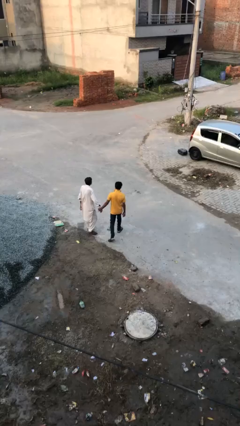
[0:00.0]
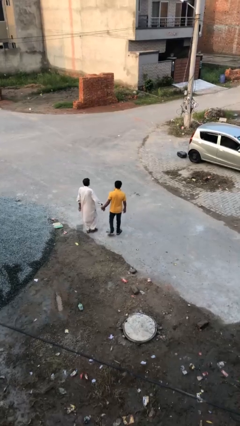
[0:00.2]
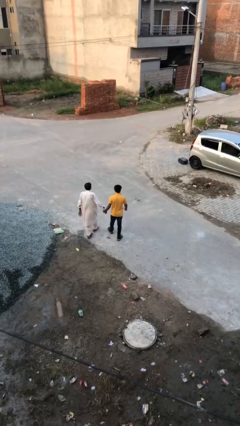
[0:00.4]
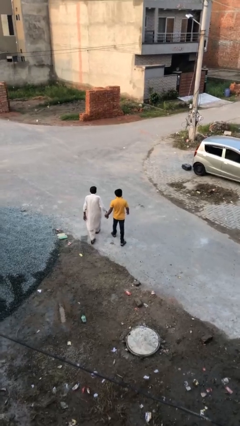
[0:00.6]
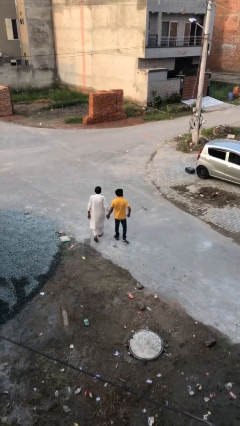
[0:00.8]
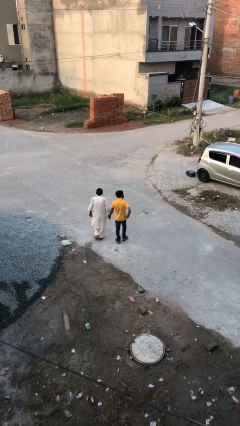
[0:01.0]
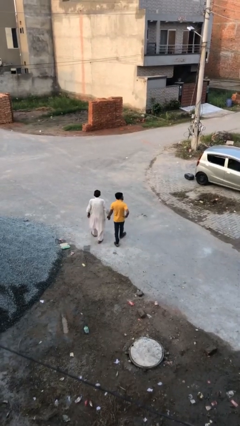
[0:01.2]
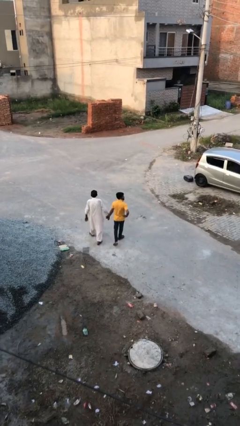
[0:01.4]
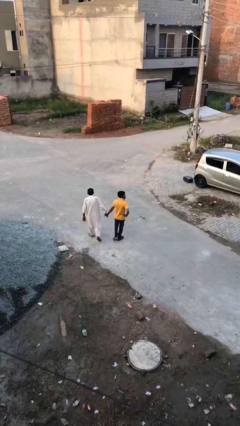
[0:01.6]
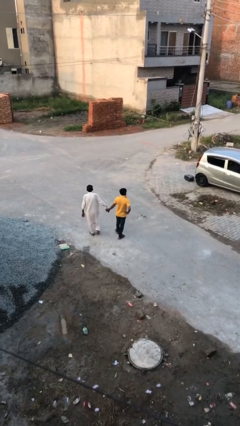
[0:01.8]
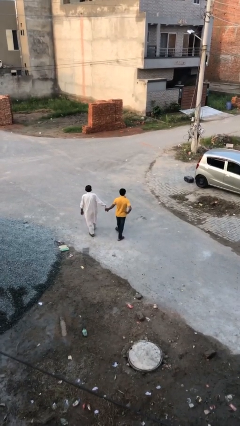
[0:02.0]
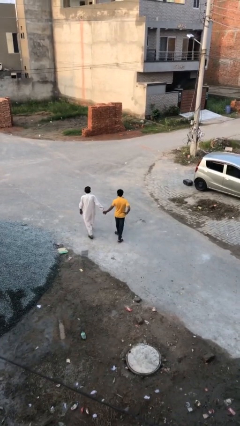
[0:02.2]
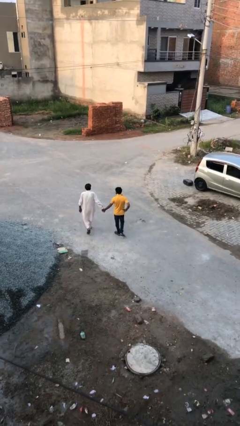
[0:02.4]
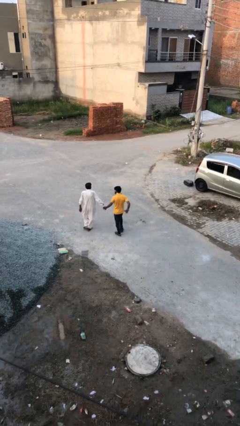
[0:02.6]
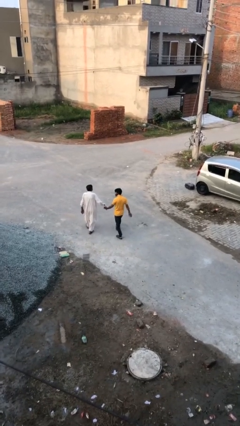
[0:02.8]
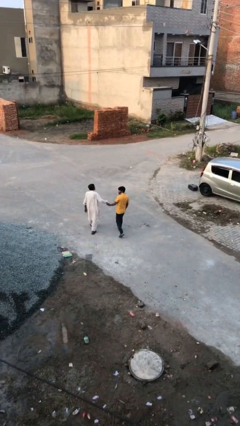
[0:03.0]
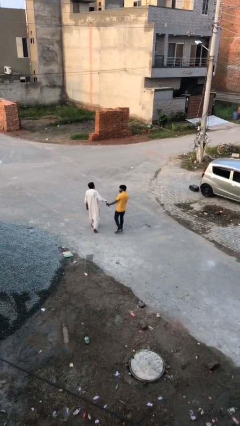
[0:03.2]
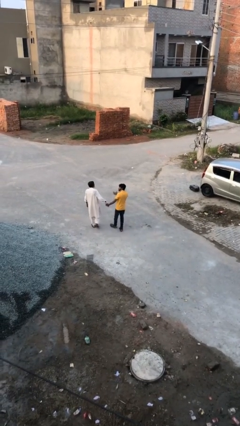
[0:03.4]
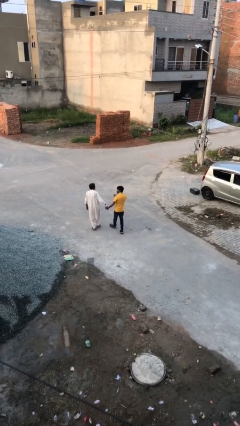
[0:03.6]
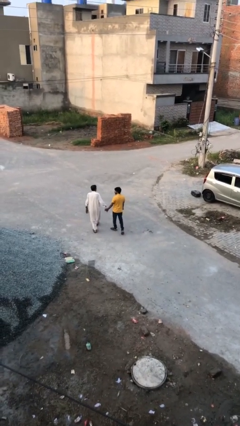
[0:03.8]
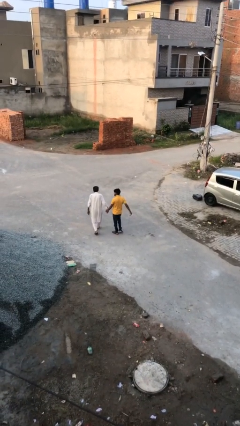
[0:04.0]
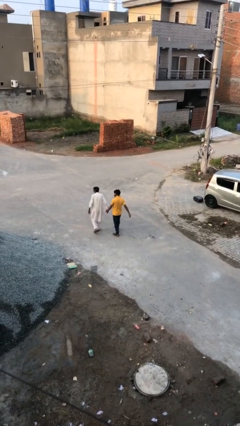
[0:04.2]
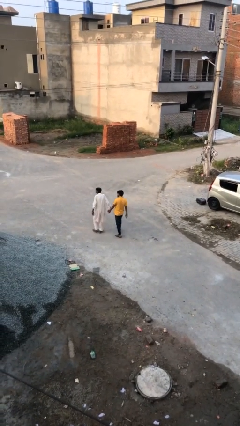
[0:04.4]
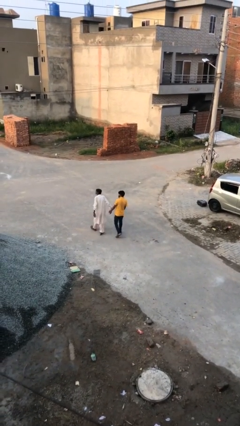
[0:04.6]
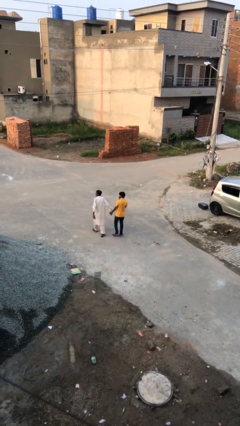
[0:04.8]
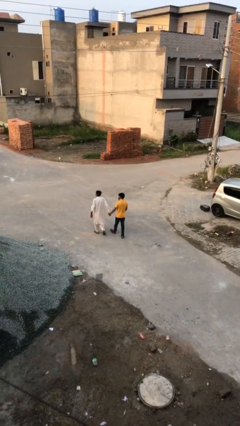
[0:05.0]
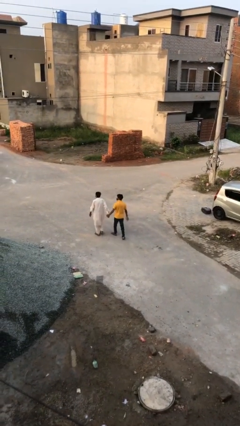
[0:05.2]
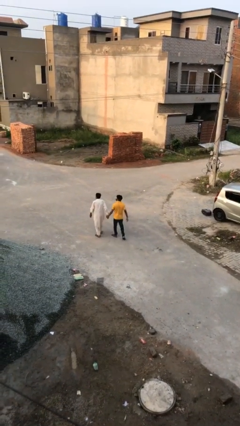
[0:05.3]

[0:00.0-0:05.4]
person holds hand

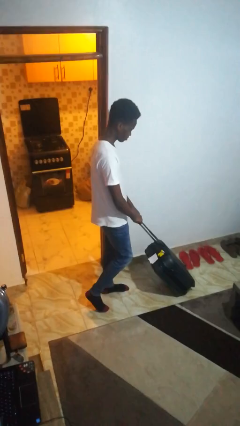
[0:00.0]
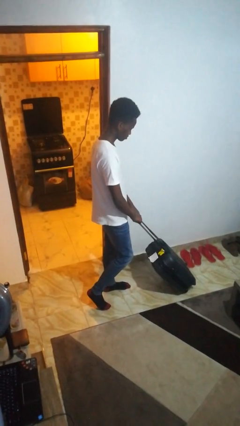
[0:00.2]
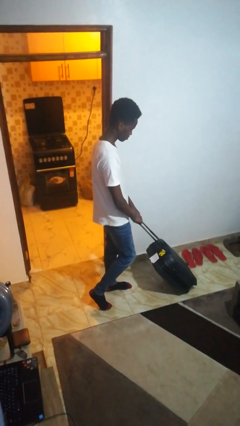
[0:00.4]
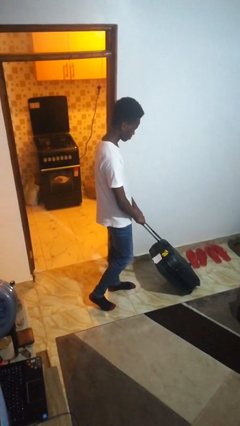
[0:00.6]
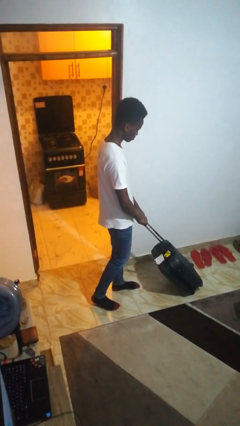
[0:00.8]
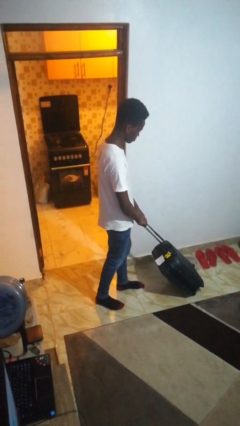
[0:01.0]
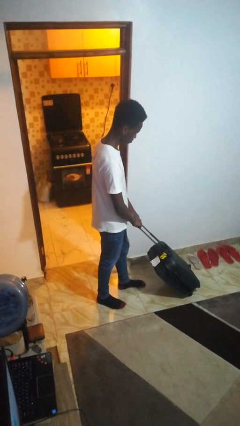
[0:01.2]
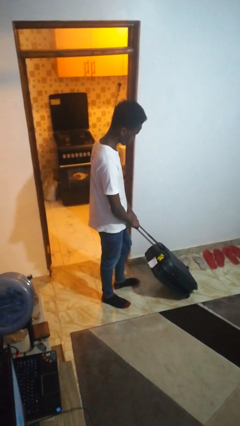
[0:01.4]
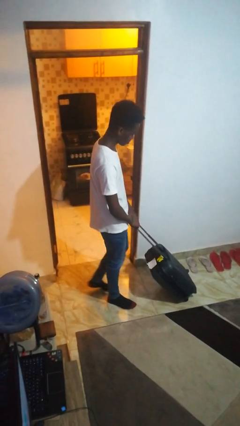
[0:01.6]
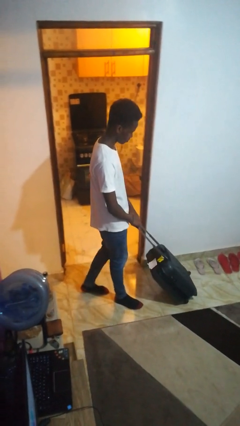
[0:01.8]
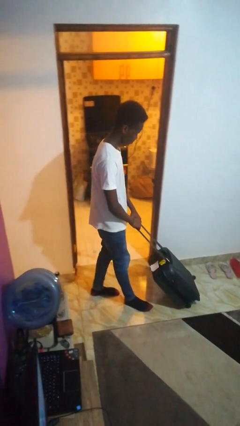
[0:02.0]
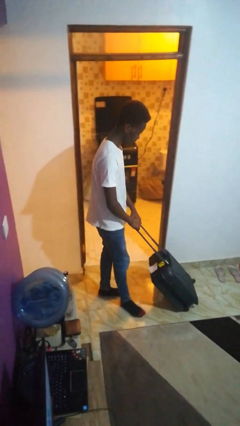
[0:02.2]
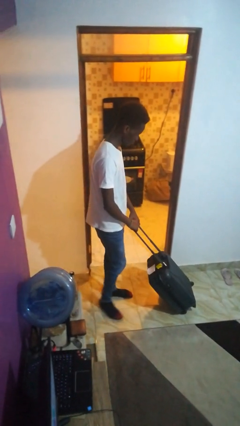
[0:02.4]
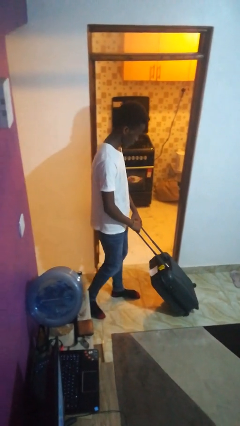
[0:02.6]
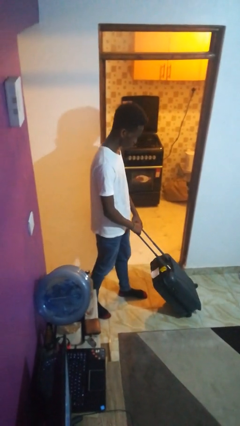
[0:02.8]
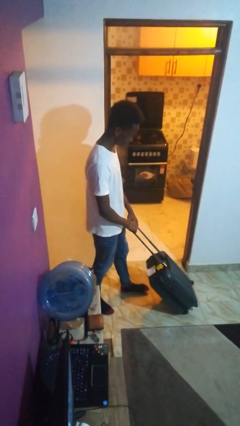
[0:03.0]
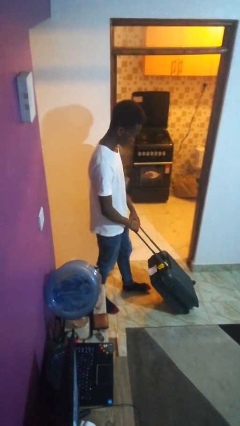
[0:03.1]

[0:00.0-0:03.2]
person pulls wheeled cart

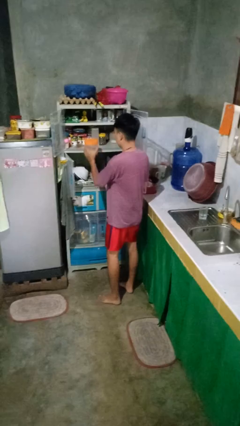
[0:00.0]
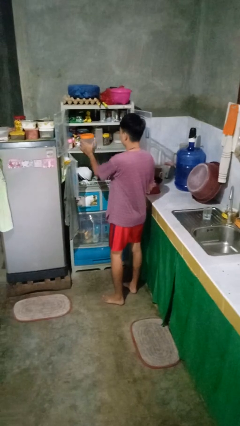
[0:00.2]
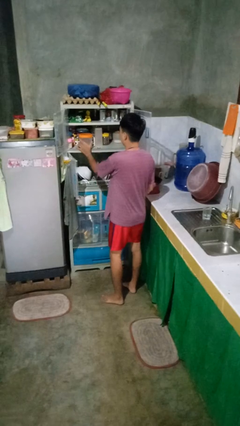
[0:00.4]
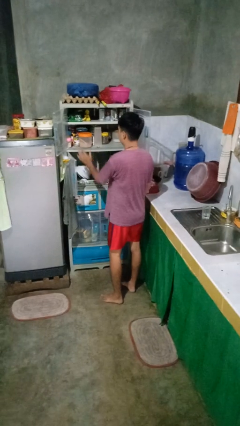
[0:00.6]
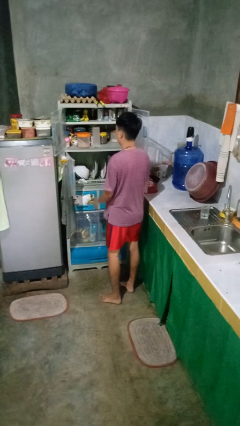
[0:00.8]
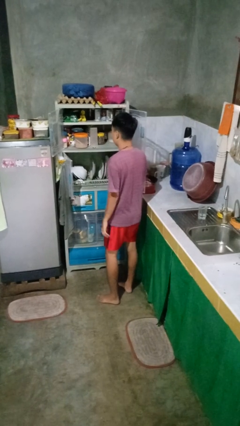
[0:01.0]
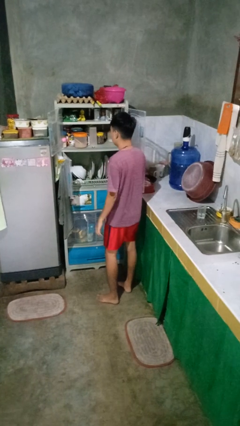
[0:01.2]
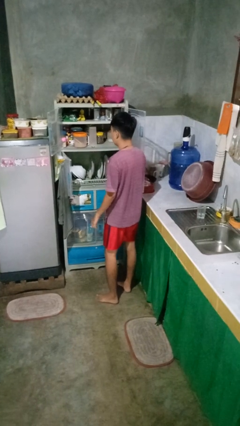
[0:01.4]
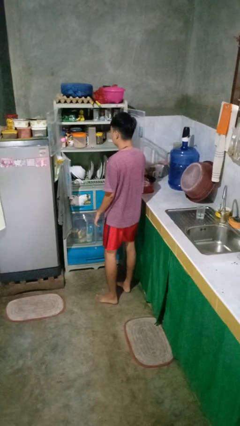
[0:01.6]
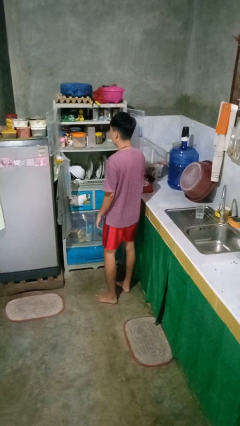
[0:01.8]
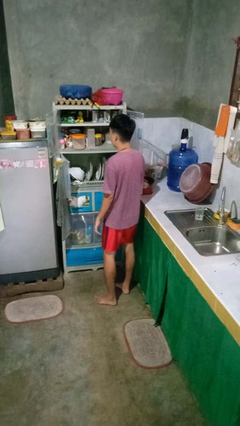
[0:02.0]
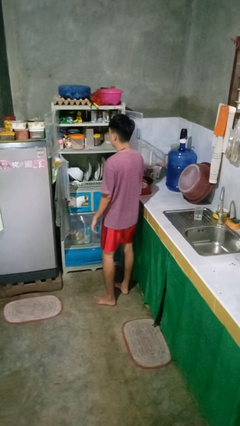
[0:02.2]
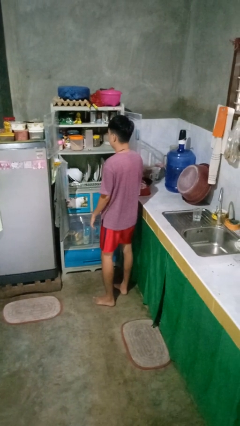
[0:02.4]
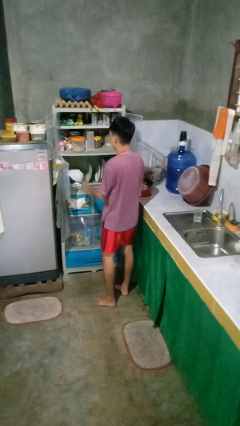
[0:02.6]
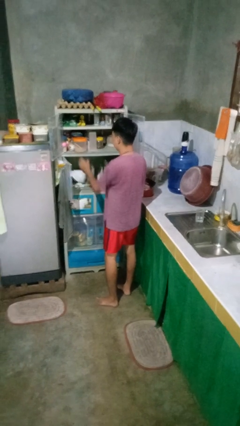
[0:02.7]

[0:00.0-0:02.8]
person puts object in cabinet

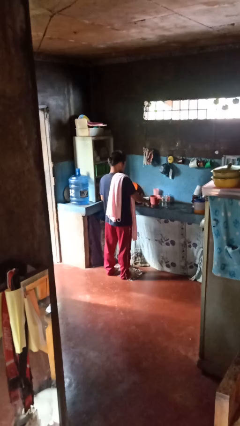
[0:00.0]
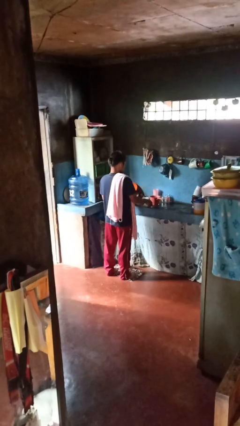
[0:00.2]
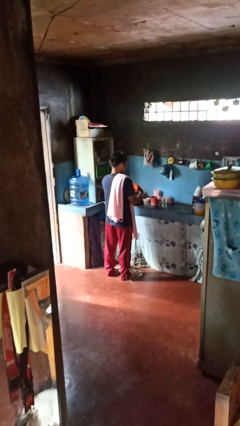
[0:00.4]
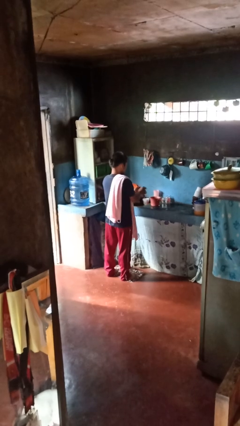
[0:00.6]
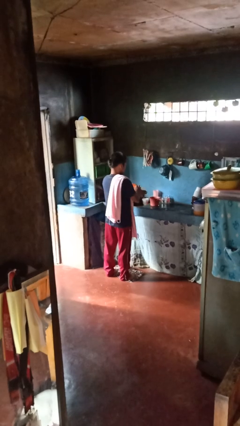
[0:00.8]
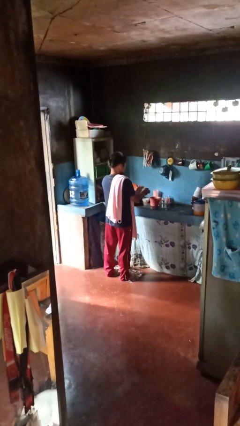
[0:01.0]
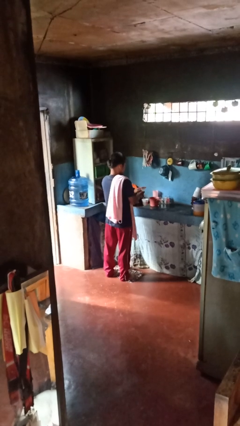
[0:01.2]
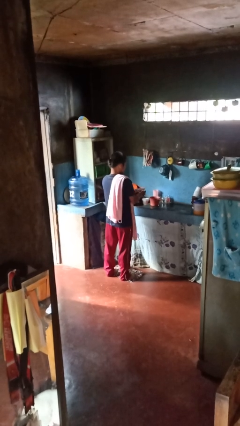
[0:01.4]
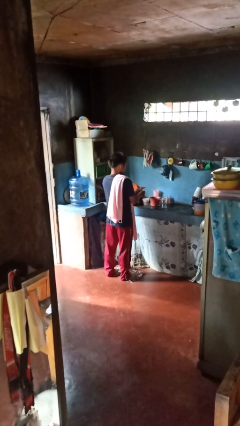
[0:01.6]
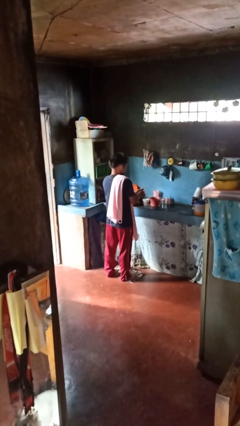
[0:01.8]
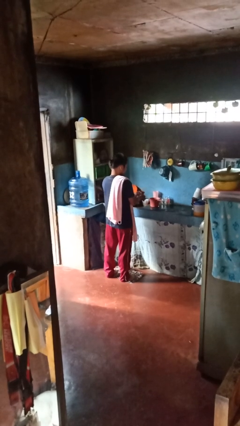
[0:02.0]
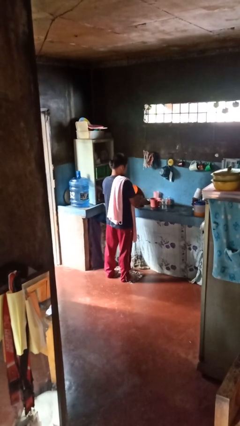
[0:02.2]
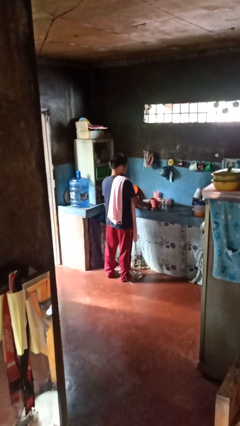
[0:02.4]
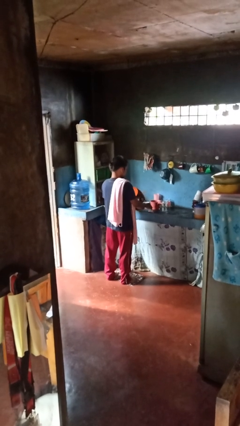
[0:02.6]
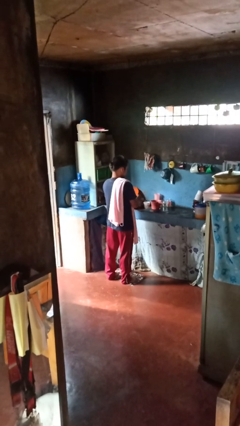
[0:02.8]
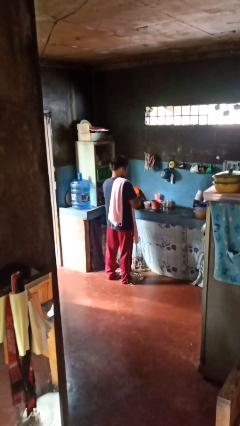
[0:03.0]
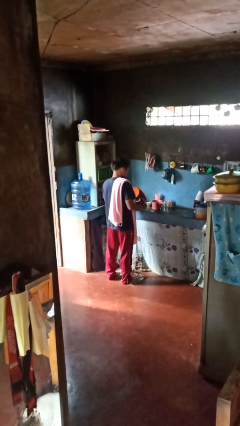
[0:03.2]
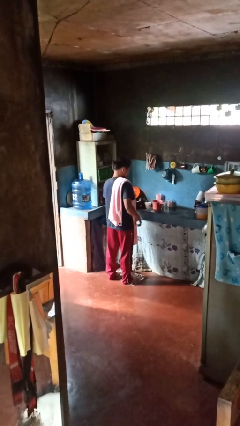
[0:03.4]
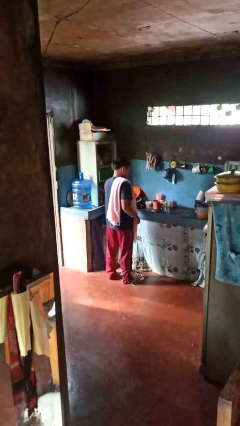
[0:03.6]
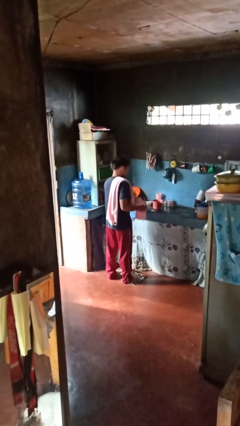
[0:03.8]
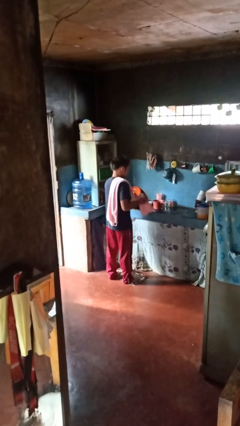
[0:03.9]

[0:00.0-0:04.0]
person washes hands

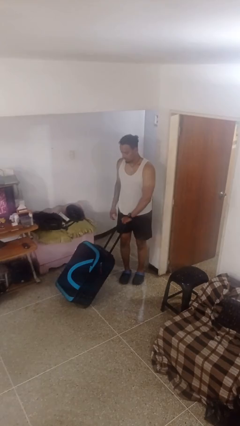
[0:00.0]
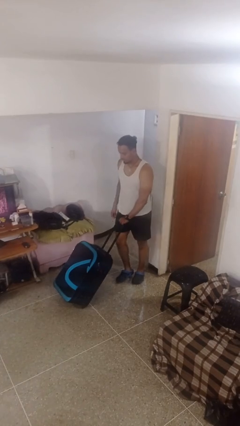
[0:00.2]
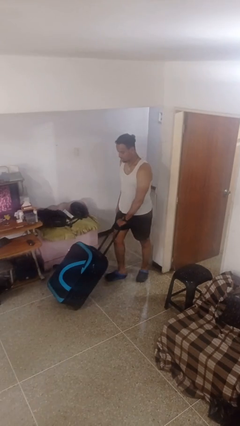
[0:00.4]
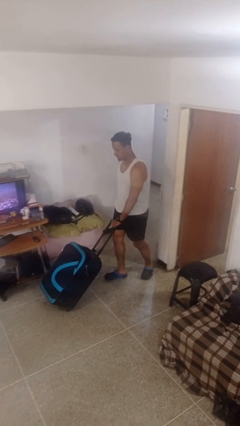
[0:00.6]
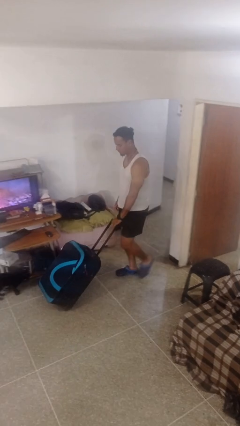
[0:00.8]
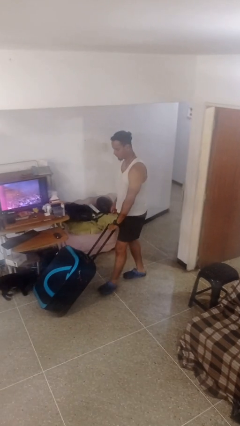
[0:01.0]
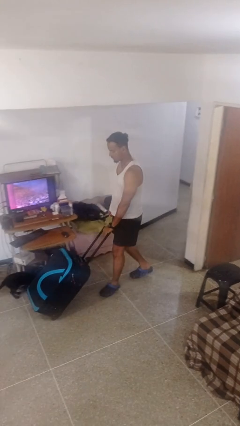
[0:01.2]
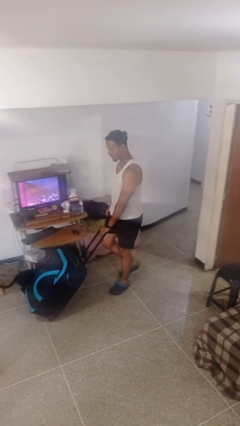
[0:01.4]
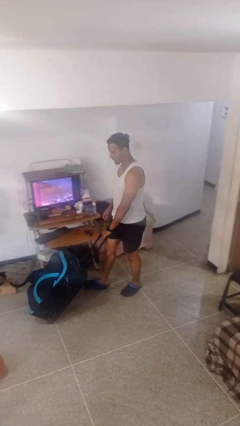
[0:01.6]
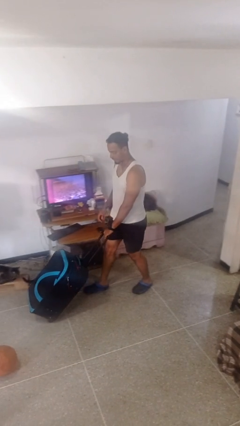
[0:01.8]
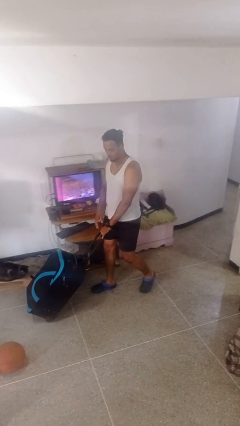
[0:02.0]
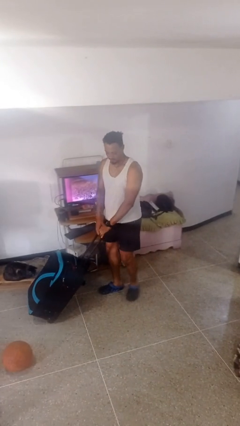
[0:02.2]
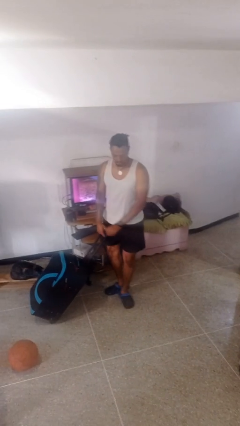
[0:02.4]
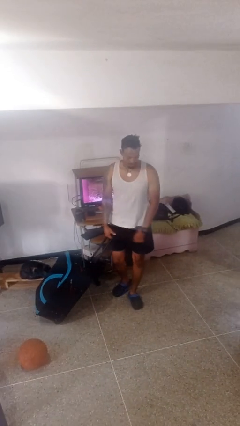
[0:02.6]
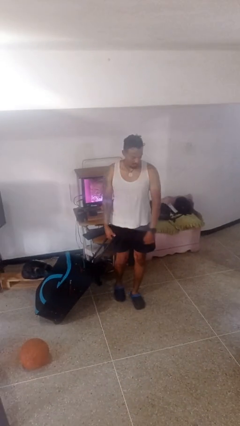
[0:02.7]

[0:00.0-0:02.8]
person pushes wheeled cart
